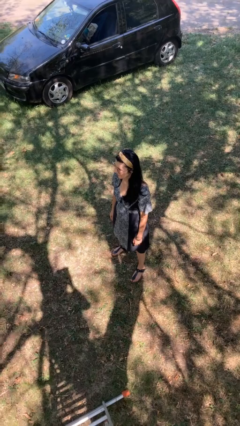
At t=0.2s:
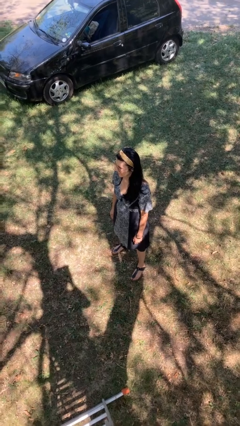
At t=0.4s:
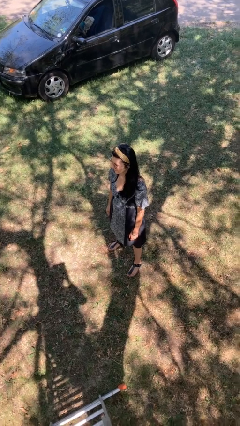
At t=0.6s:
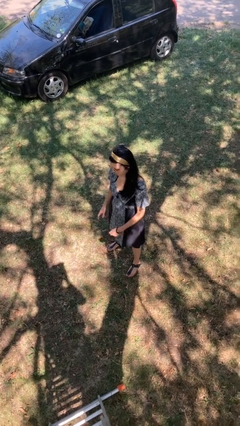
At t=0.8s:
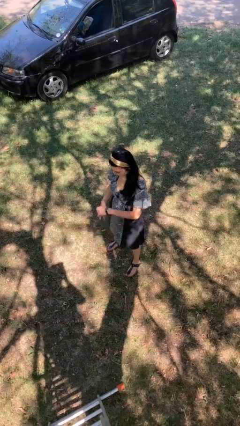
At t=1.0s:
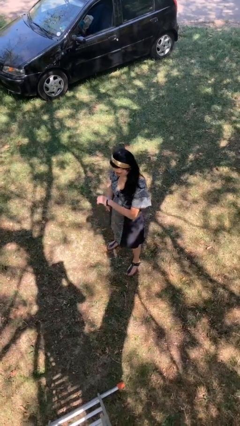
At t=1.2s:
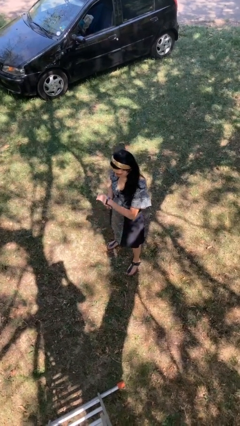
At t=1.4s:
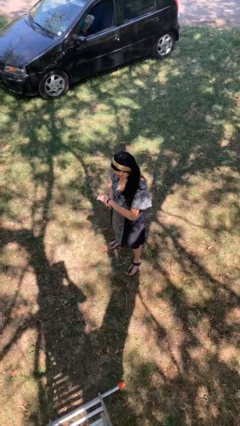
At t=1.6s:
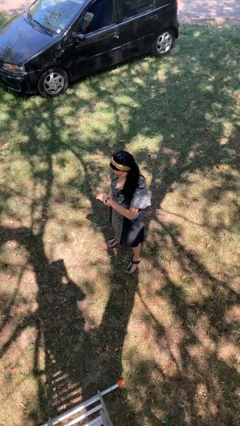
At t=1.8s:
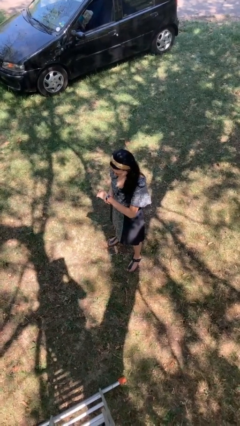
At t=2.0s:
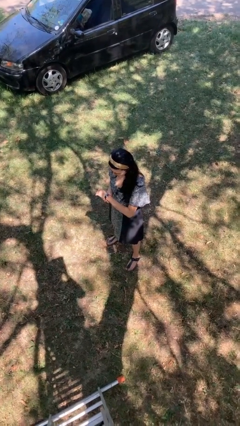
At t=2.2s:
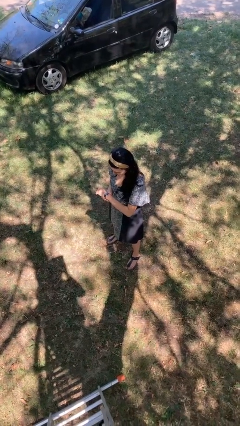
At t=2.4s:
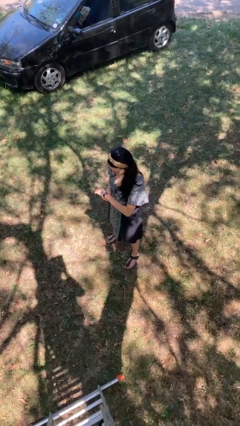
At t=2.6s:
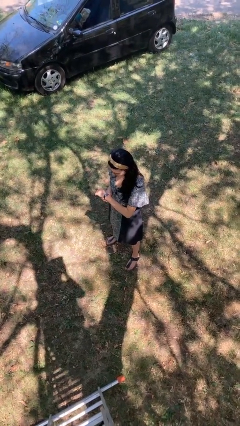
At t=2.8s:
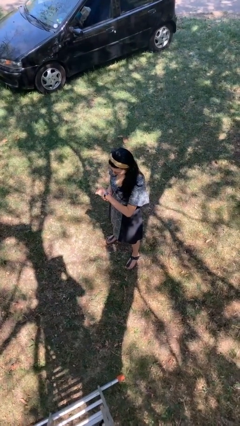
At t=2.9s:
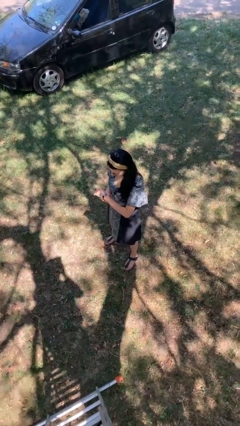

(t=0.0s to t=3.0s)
person looks at wristwatch

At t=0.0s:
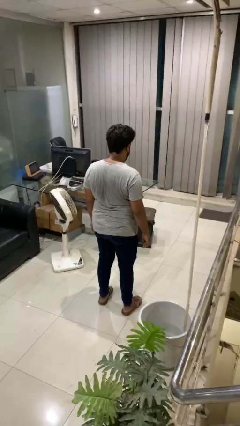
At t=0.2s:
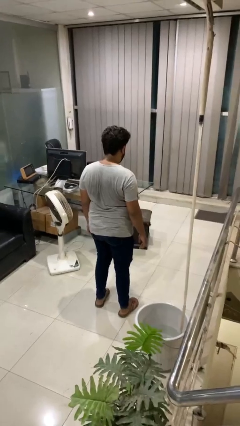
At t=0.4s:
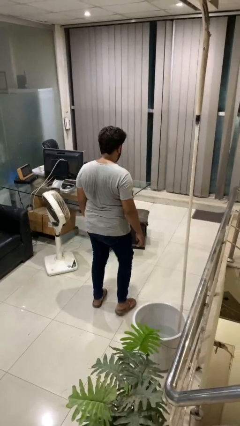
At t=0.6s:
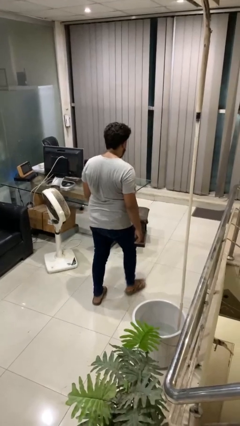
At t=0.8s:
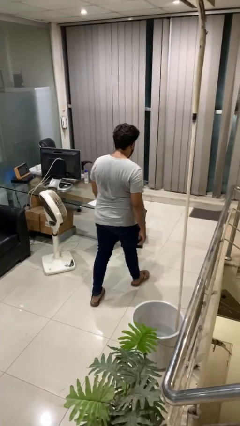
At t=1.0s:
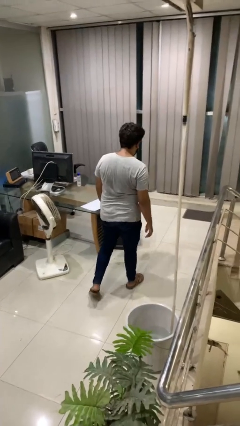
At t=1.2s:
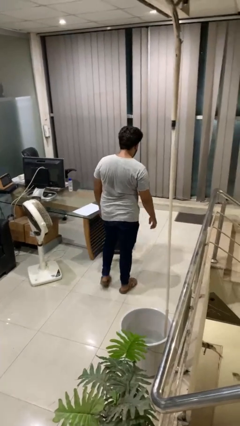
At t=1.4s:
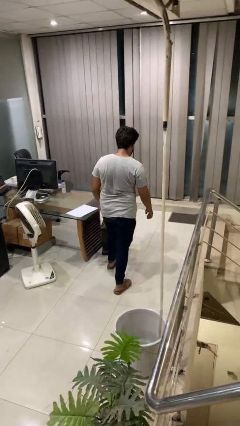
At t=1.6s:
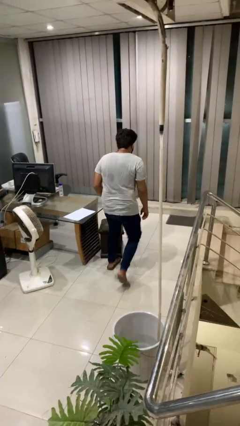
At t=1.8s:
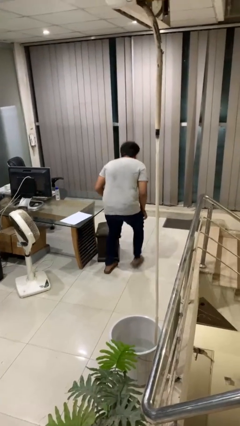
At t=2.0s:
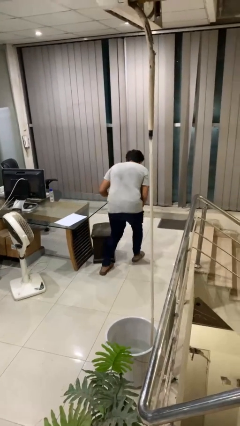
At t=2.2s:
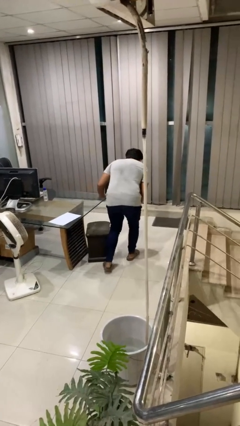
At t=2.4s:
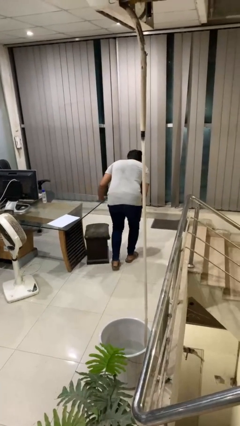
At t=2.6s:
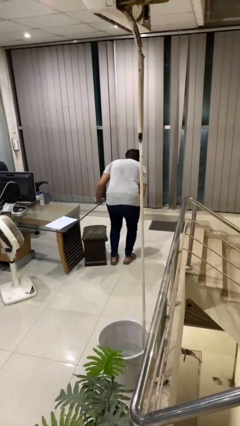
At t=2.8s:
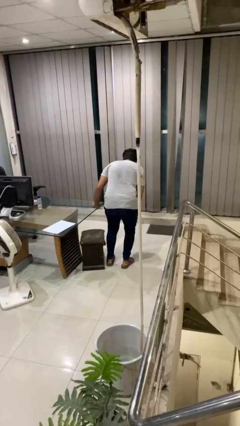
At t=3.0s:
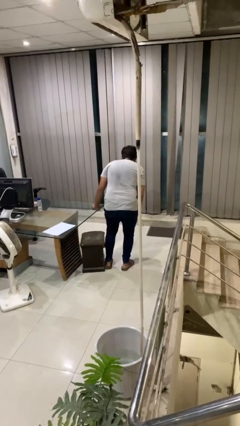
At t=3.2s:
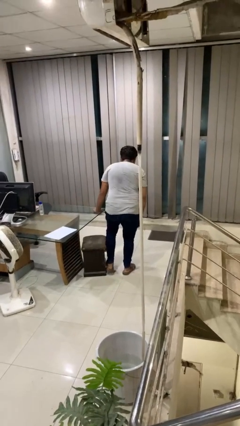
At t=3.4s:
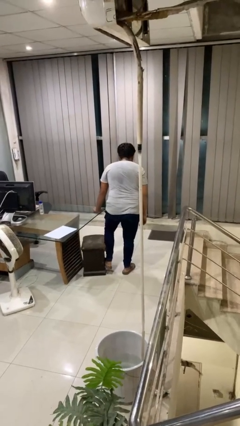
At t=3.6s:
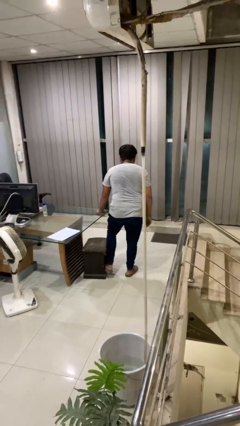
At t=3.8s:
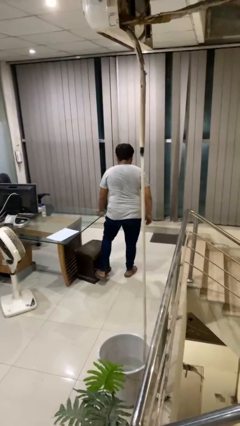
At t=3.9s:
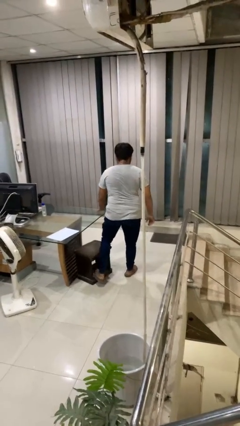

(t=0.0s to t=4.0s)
person bumps into table

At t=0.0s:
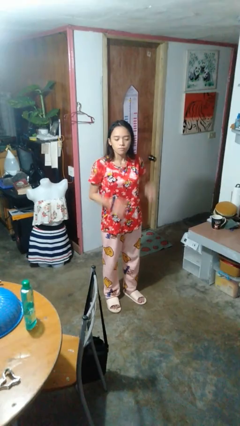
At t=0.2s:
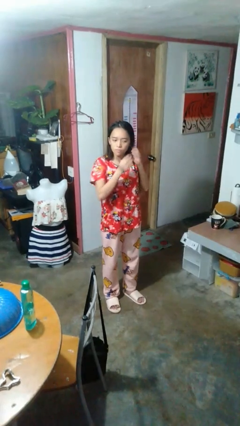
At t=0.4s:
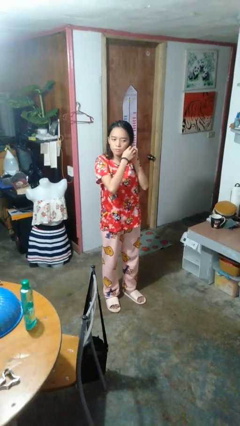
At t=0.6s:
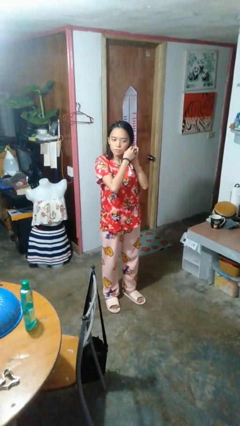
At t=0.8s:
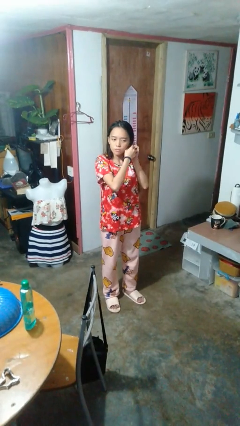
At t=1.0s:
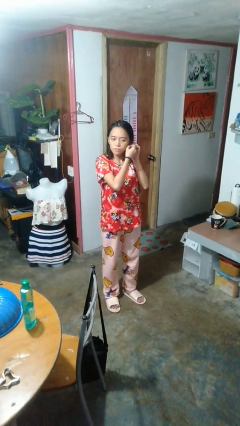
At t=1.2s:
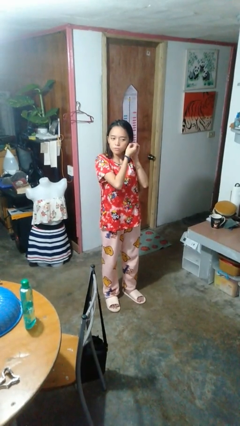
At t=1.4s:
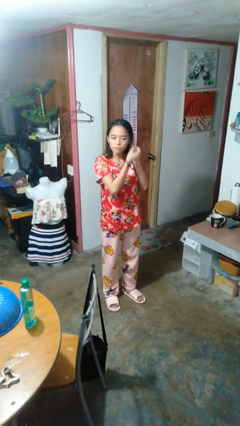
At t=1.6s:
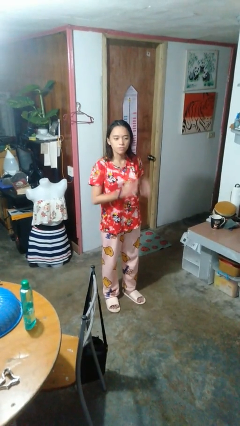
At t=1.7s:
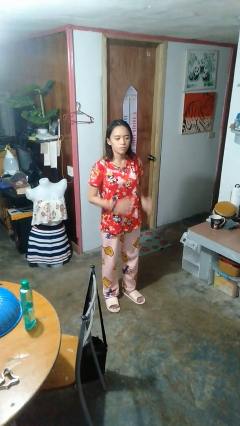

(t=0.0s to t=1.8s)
person takes off earrings

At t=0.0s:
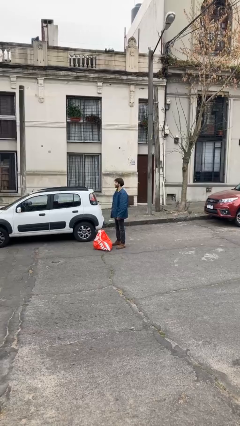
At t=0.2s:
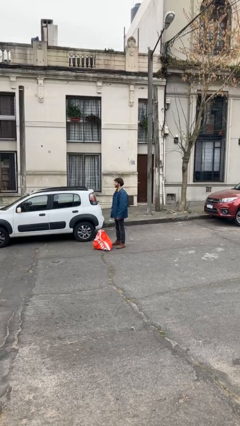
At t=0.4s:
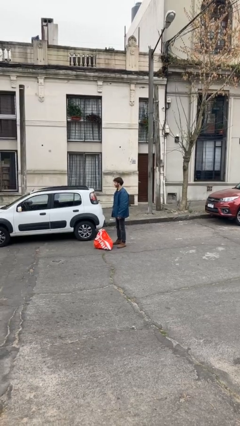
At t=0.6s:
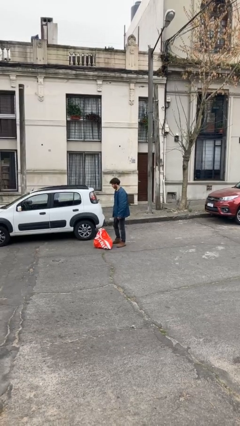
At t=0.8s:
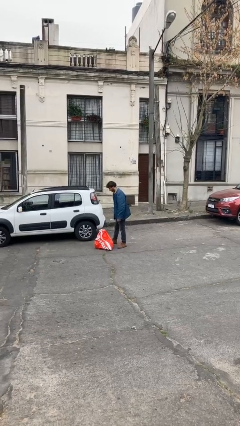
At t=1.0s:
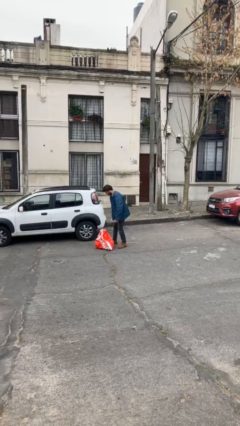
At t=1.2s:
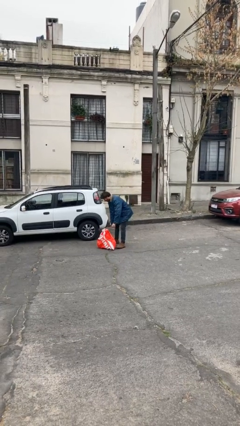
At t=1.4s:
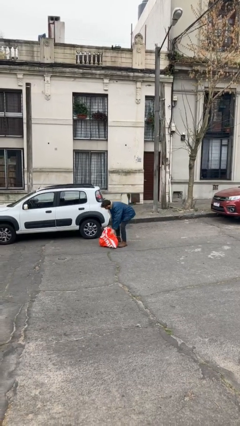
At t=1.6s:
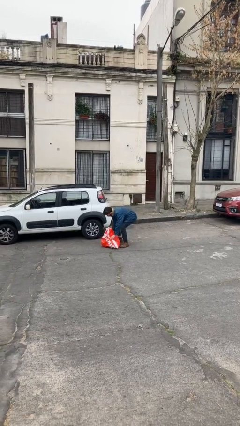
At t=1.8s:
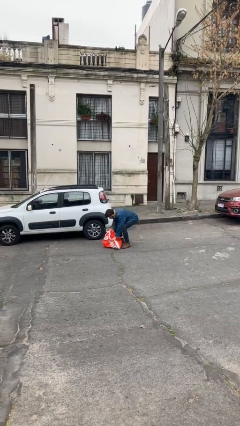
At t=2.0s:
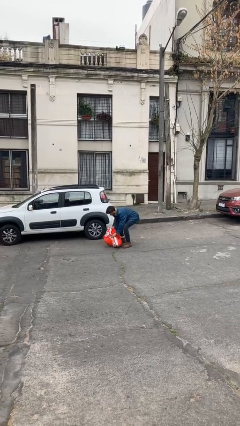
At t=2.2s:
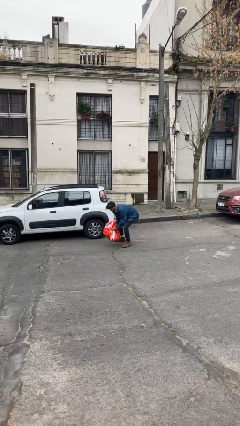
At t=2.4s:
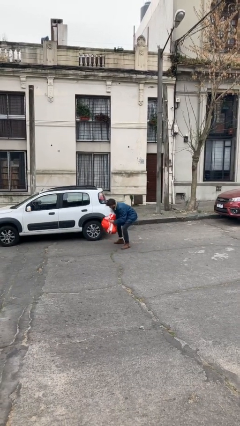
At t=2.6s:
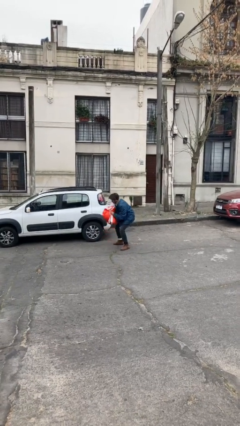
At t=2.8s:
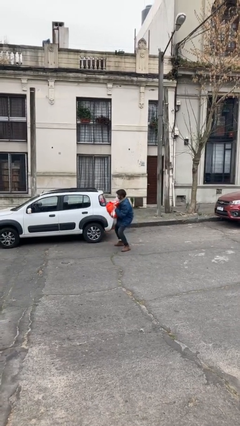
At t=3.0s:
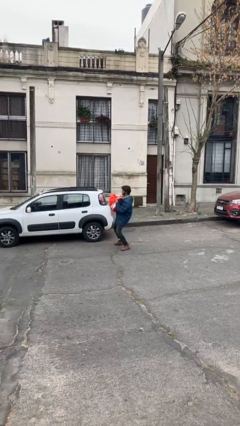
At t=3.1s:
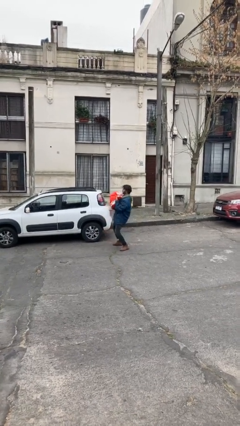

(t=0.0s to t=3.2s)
person picks up object from floor

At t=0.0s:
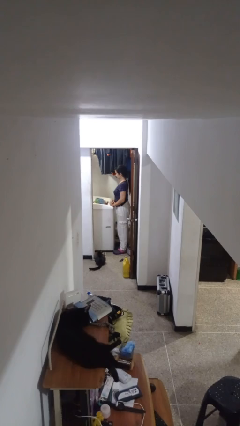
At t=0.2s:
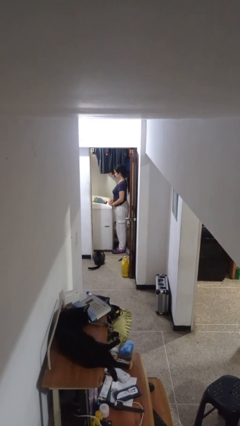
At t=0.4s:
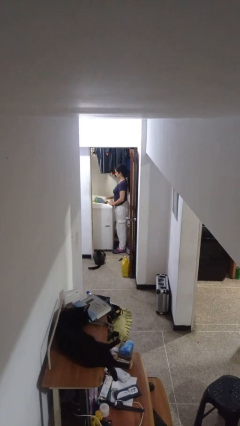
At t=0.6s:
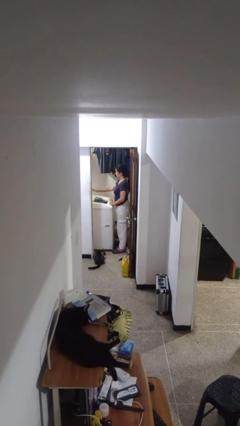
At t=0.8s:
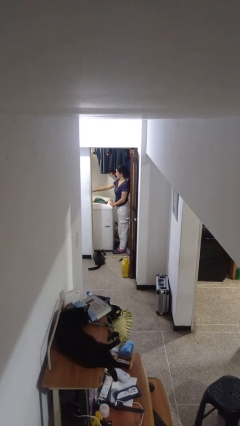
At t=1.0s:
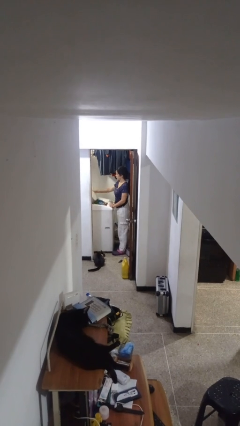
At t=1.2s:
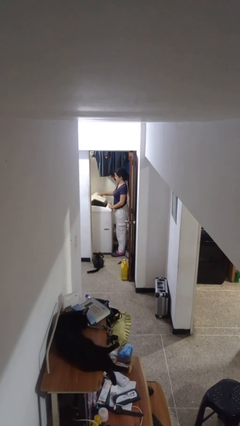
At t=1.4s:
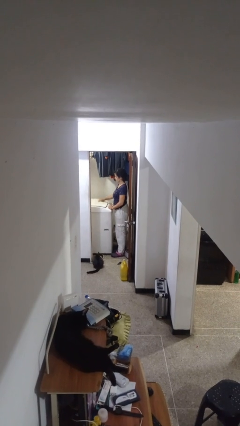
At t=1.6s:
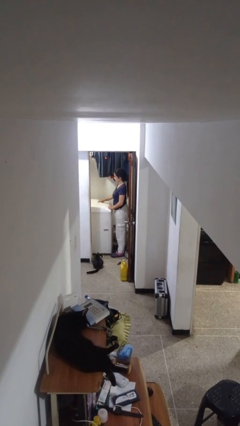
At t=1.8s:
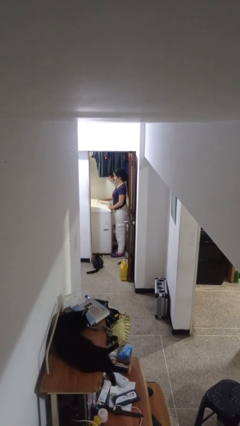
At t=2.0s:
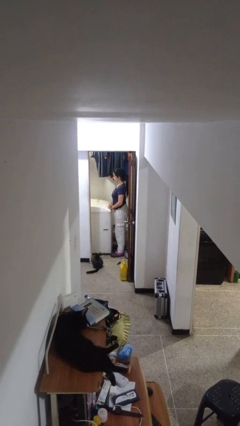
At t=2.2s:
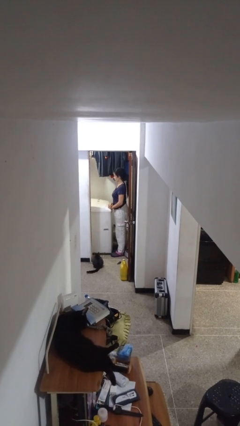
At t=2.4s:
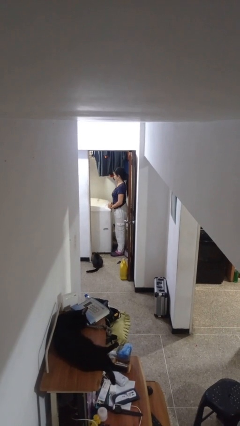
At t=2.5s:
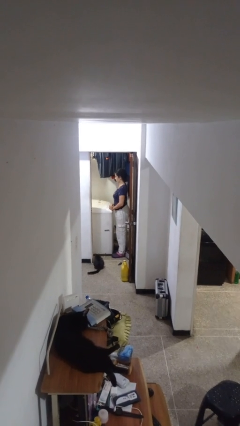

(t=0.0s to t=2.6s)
person closes clothes washer

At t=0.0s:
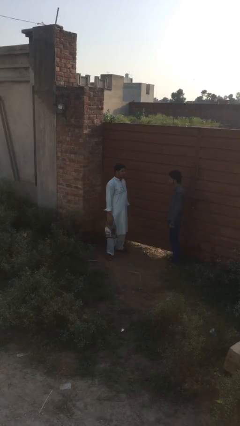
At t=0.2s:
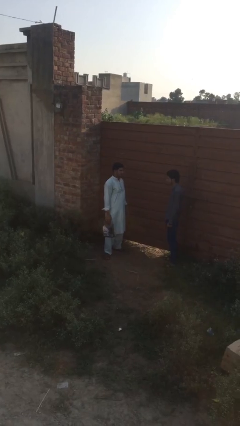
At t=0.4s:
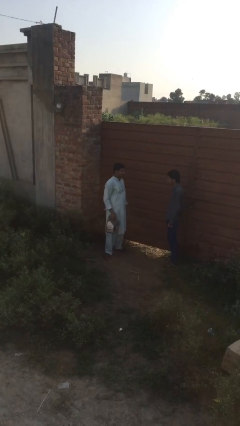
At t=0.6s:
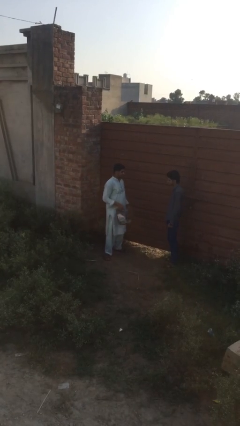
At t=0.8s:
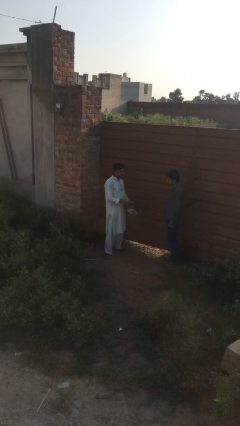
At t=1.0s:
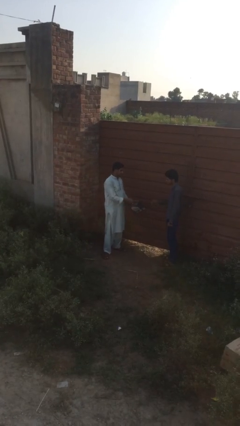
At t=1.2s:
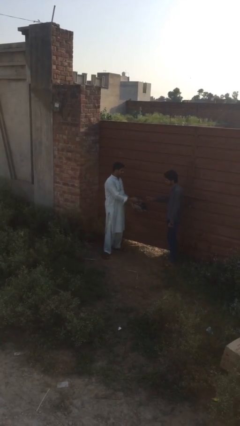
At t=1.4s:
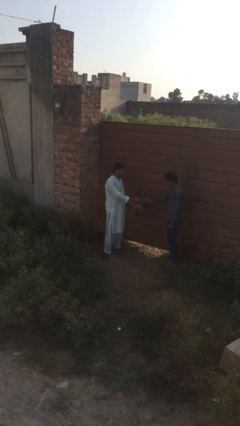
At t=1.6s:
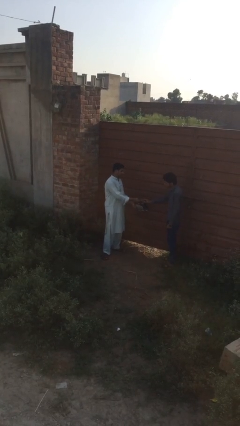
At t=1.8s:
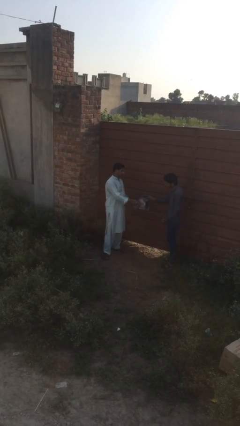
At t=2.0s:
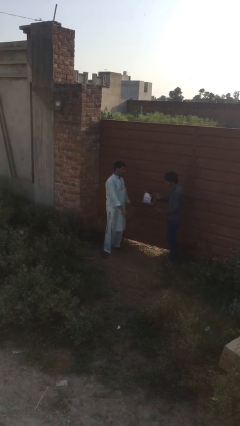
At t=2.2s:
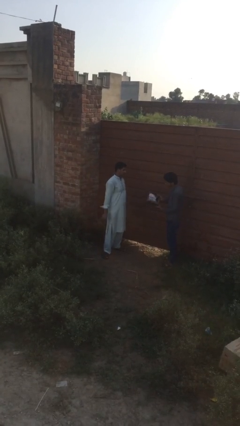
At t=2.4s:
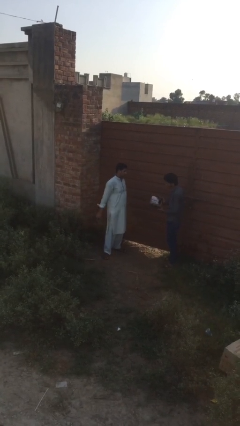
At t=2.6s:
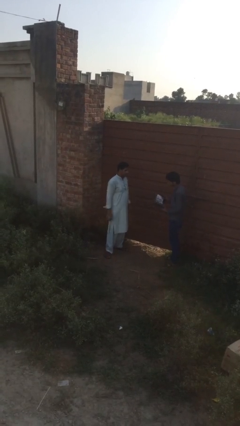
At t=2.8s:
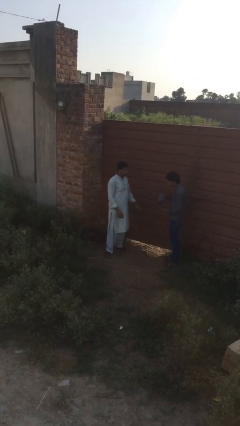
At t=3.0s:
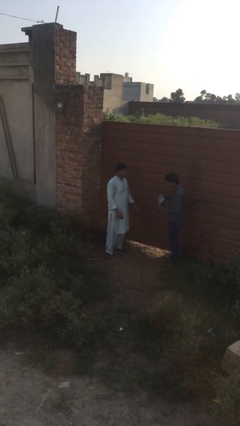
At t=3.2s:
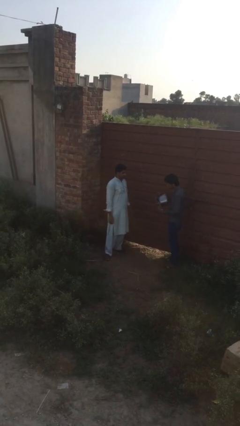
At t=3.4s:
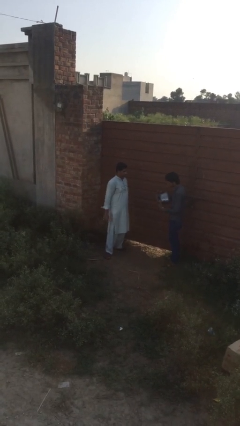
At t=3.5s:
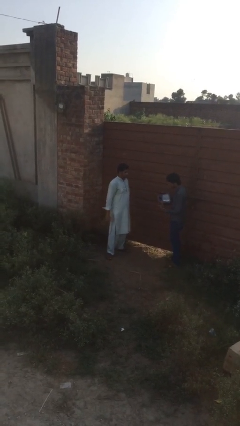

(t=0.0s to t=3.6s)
person transfers object to person
